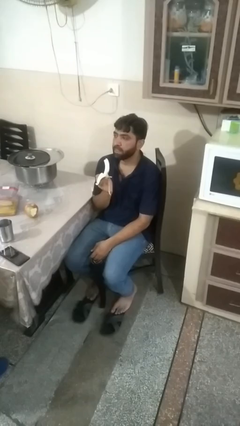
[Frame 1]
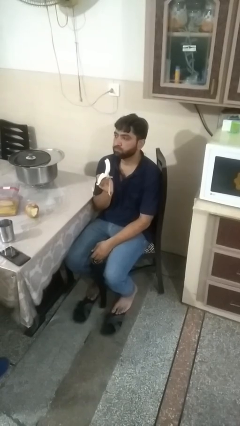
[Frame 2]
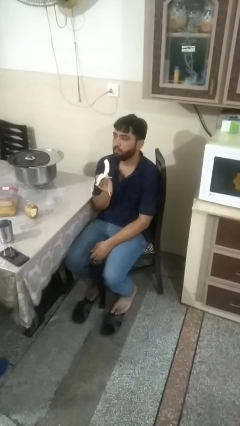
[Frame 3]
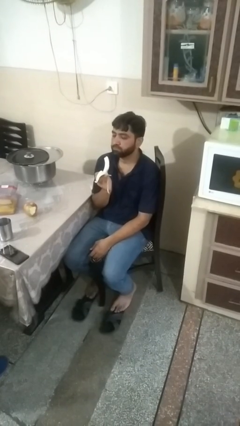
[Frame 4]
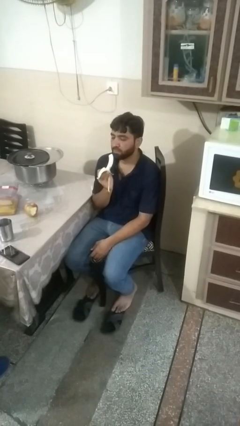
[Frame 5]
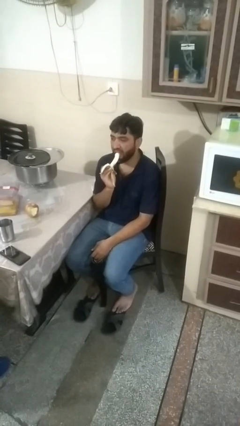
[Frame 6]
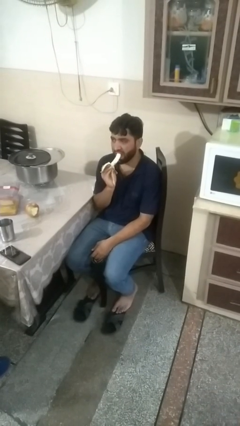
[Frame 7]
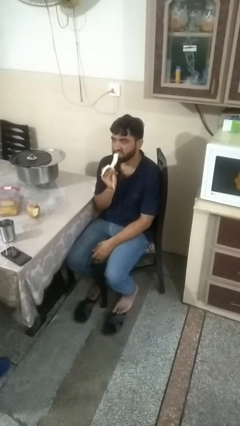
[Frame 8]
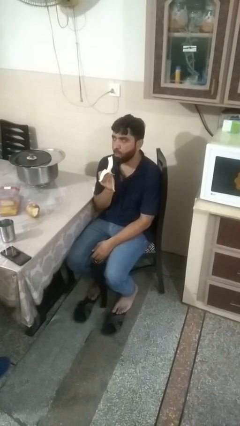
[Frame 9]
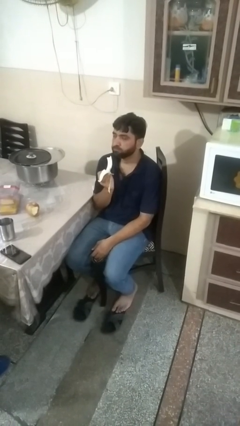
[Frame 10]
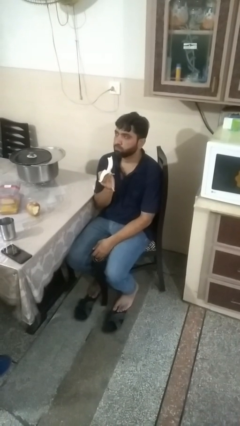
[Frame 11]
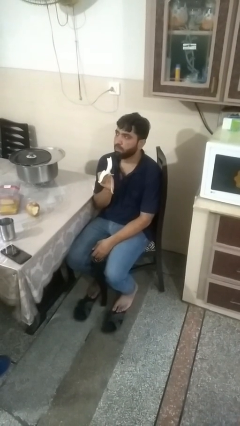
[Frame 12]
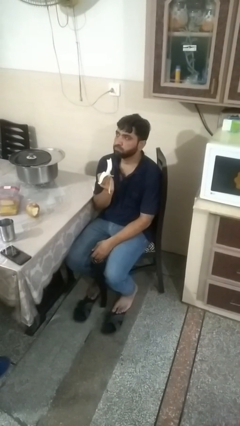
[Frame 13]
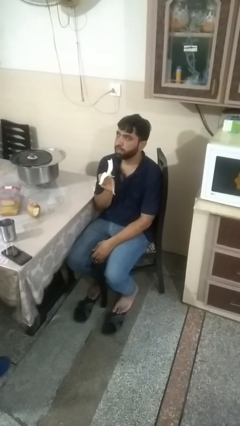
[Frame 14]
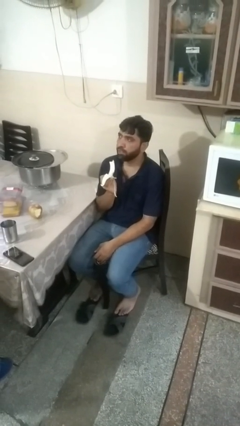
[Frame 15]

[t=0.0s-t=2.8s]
person eats banana

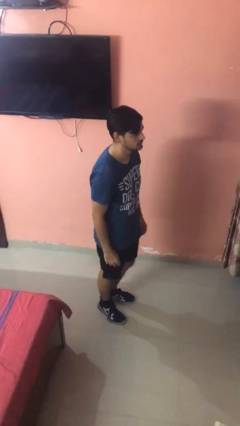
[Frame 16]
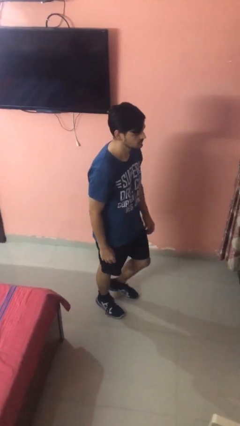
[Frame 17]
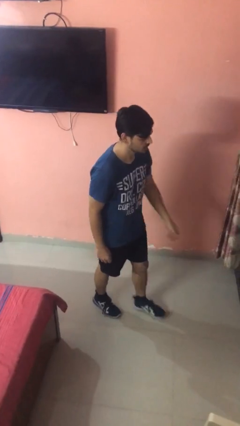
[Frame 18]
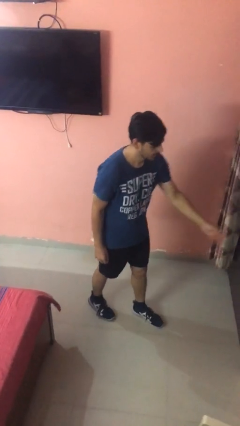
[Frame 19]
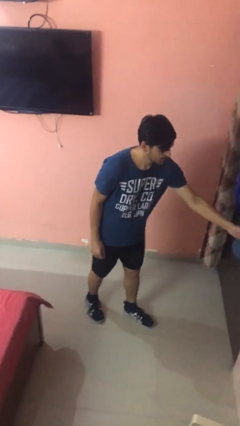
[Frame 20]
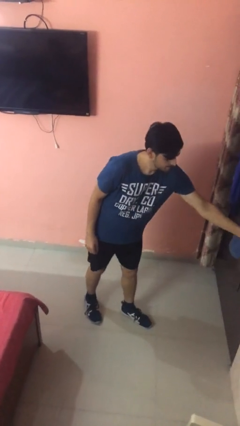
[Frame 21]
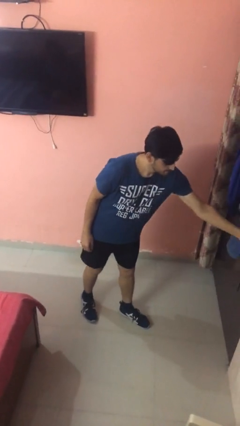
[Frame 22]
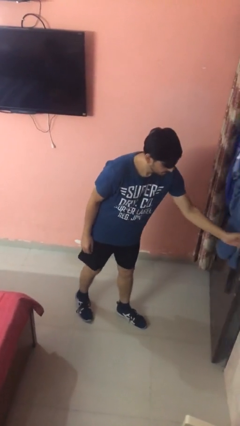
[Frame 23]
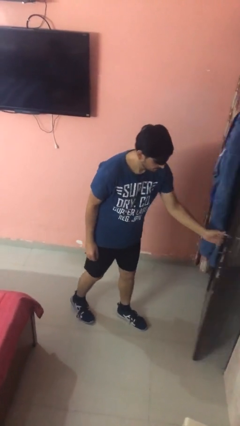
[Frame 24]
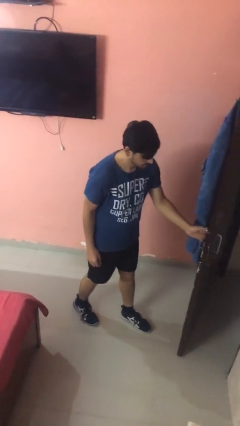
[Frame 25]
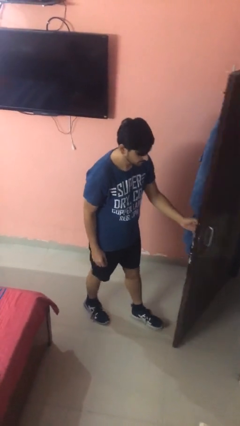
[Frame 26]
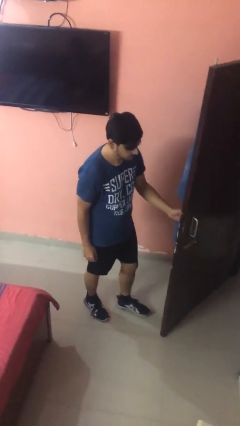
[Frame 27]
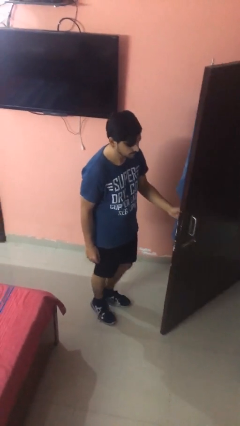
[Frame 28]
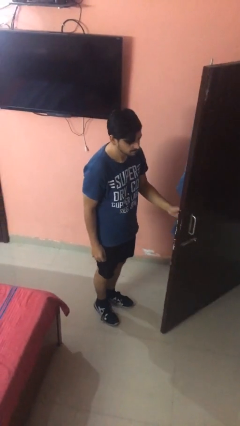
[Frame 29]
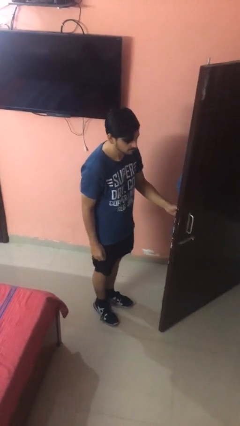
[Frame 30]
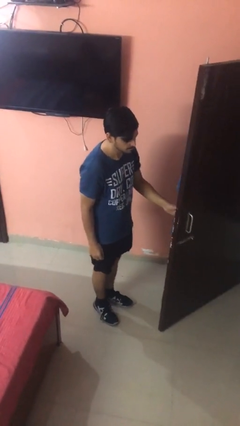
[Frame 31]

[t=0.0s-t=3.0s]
person opens facility door

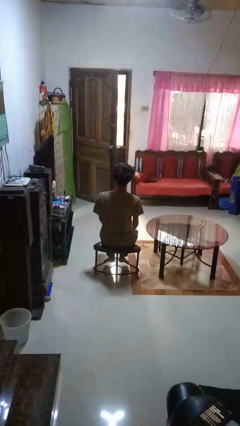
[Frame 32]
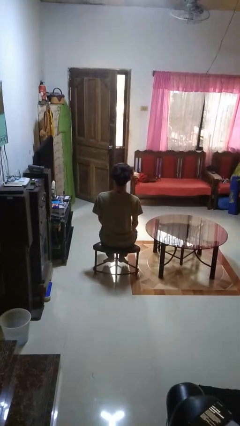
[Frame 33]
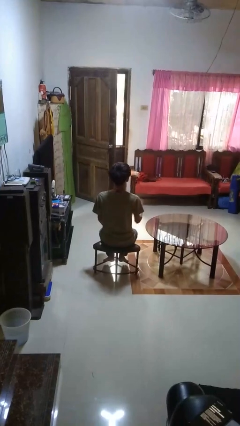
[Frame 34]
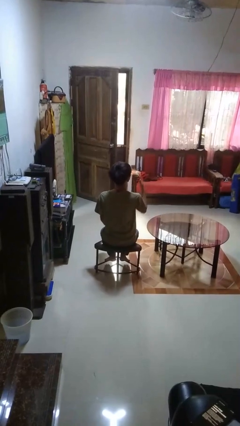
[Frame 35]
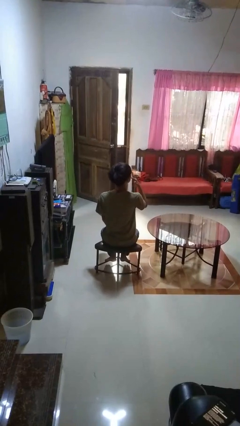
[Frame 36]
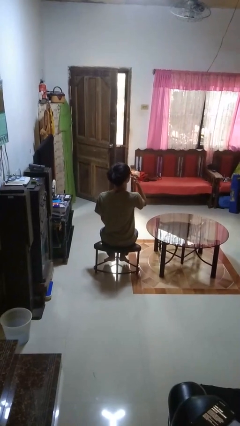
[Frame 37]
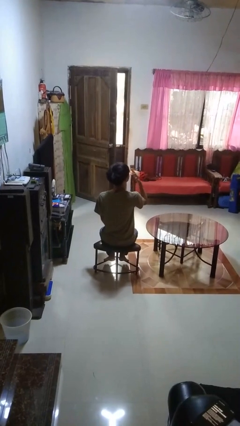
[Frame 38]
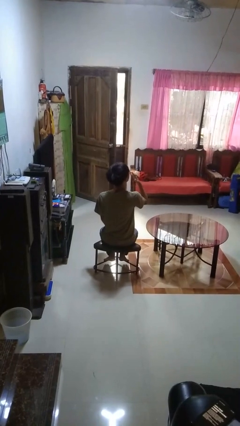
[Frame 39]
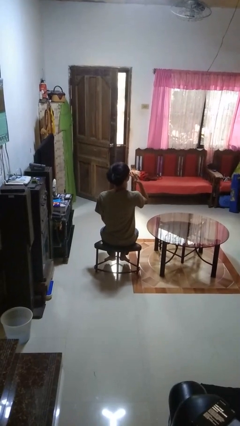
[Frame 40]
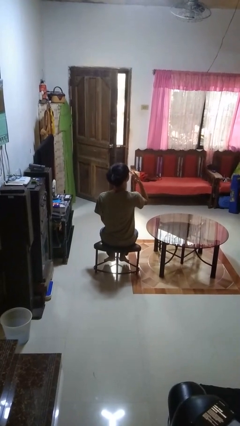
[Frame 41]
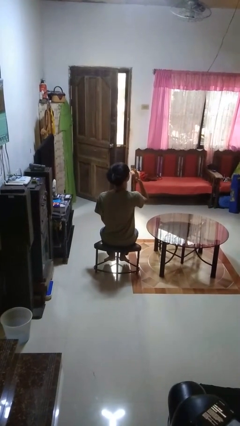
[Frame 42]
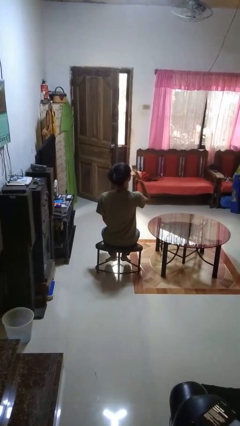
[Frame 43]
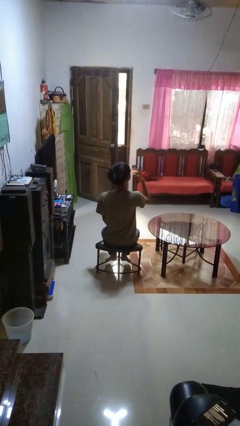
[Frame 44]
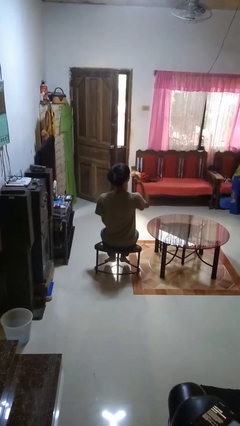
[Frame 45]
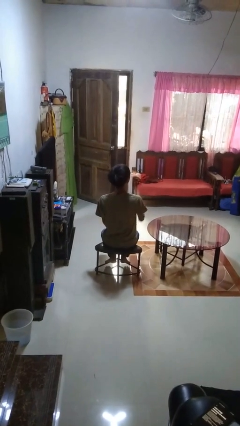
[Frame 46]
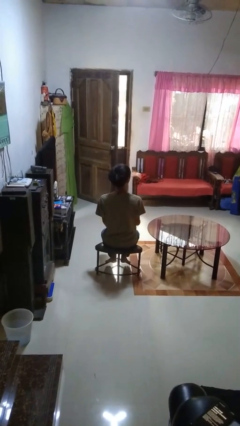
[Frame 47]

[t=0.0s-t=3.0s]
person licks fingers

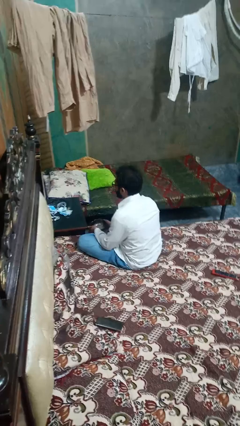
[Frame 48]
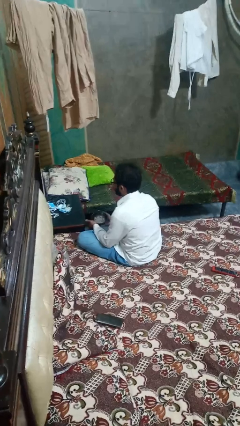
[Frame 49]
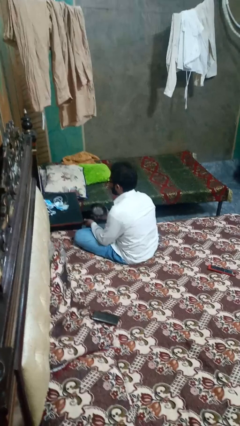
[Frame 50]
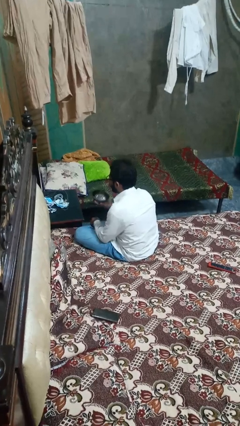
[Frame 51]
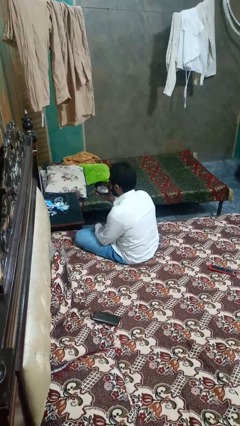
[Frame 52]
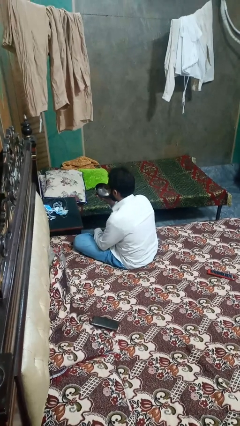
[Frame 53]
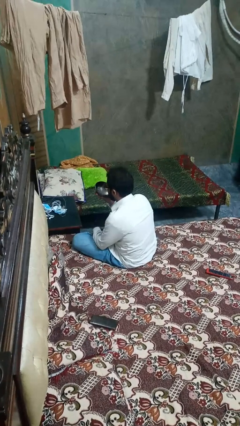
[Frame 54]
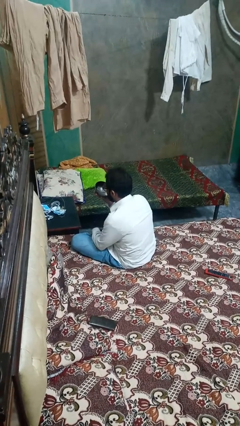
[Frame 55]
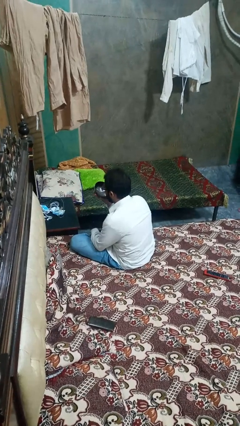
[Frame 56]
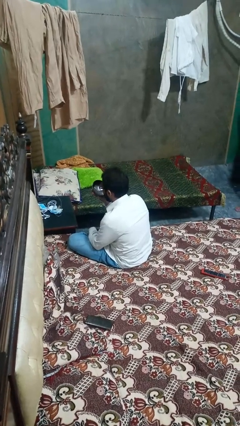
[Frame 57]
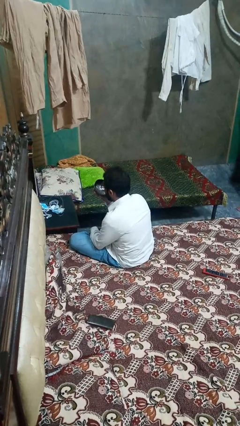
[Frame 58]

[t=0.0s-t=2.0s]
person drinks from shotglass

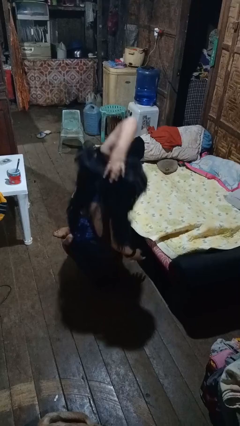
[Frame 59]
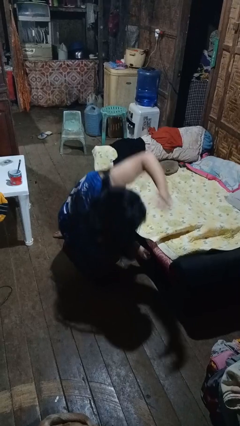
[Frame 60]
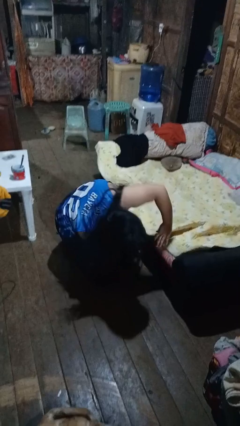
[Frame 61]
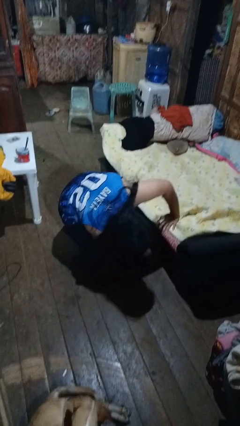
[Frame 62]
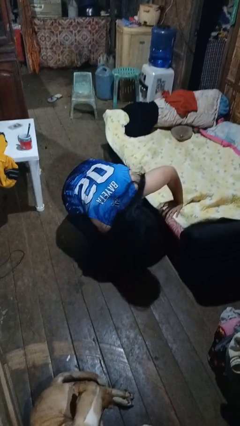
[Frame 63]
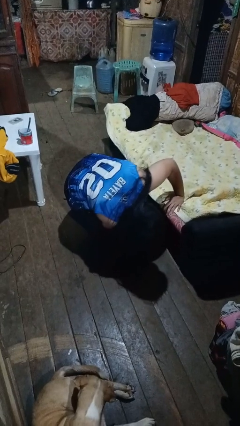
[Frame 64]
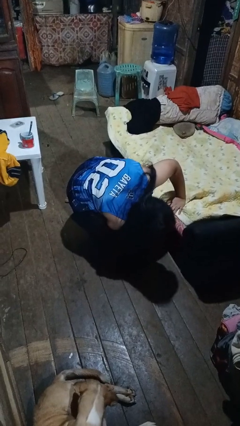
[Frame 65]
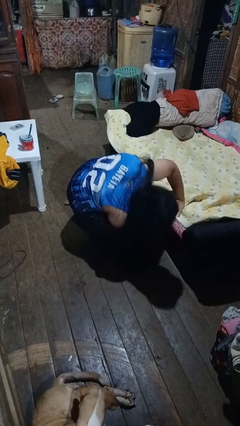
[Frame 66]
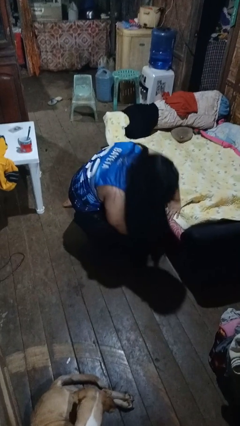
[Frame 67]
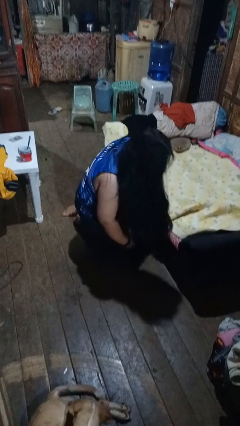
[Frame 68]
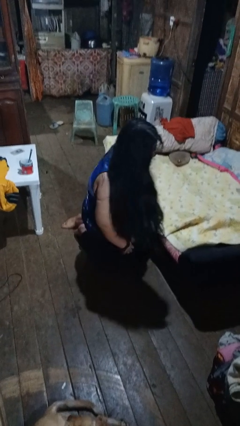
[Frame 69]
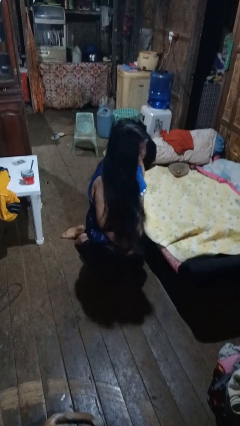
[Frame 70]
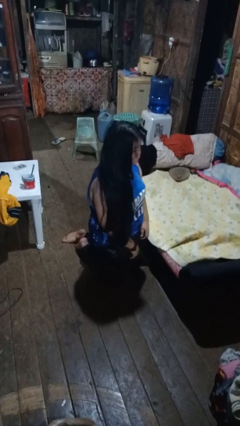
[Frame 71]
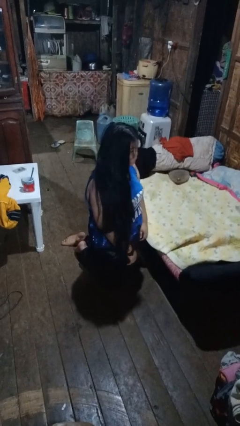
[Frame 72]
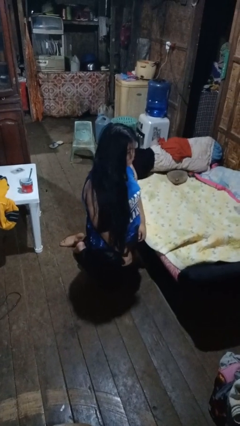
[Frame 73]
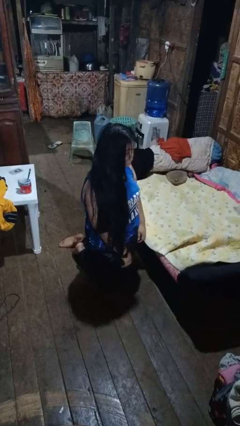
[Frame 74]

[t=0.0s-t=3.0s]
person searches under bed

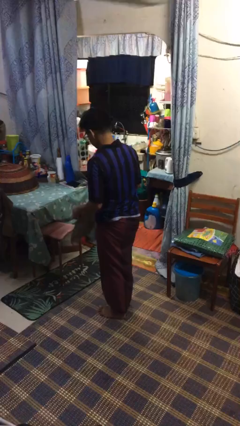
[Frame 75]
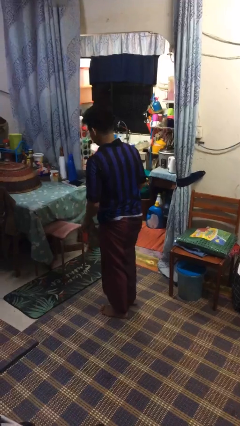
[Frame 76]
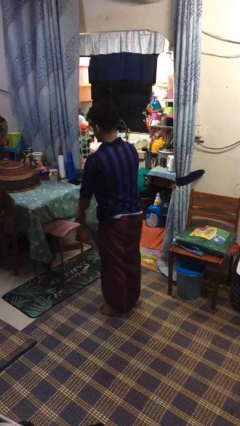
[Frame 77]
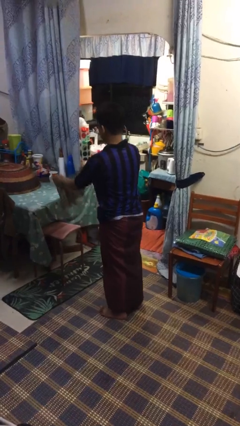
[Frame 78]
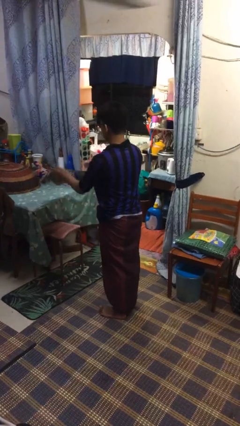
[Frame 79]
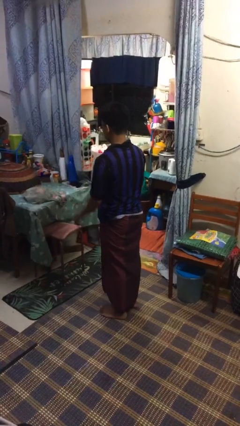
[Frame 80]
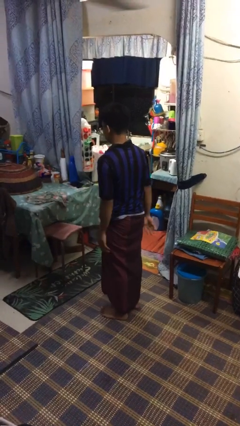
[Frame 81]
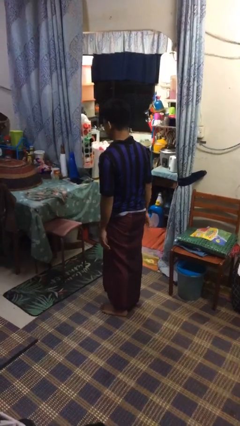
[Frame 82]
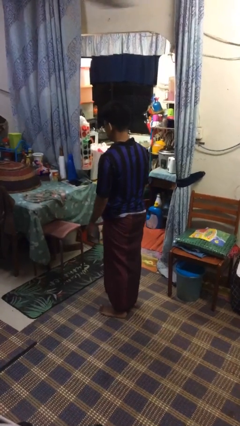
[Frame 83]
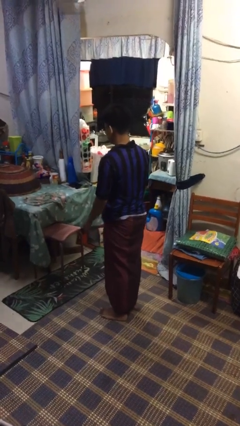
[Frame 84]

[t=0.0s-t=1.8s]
person throws object on table

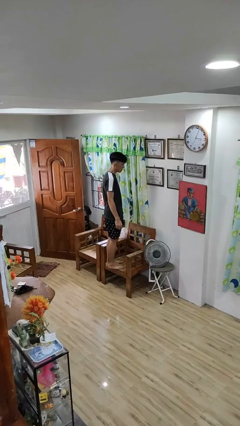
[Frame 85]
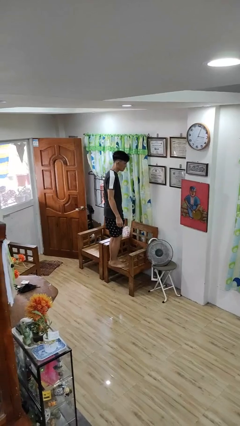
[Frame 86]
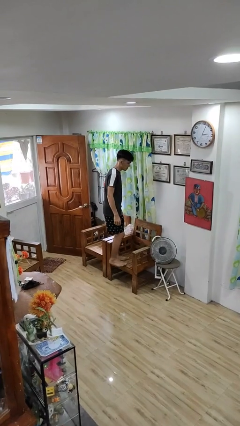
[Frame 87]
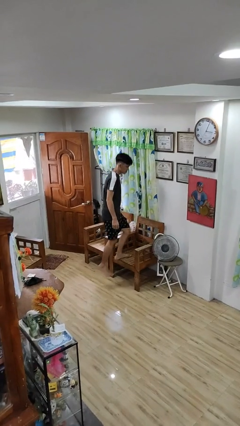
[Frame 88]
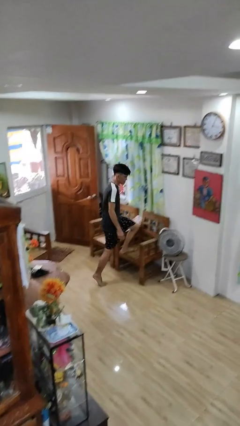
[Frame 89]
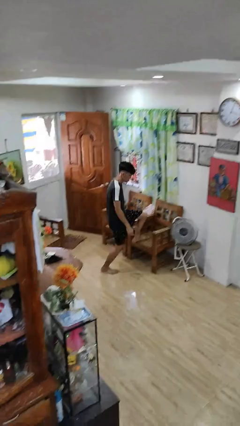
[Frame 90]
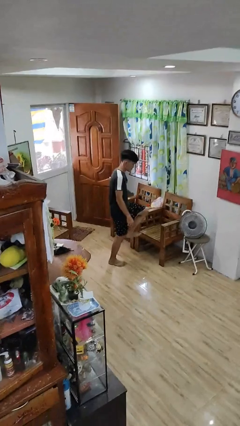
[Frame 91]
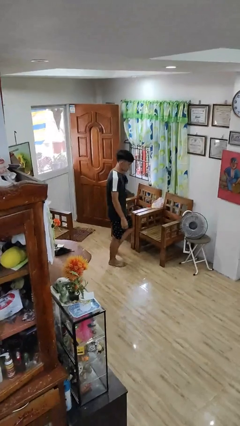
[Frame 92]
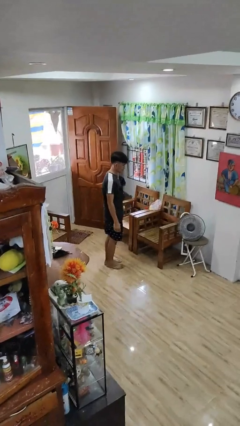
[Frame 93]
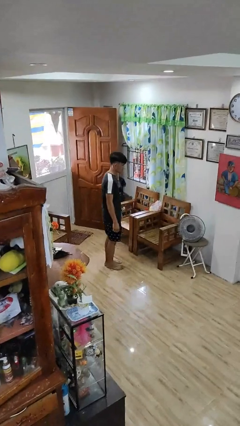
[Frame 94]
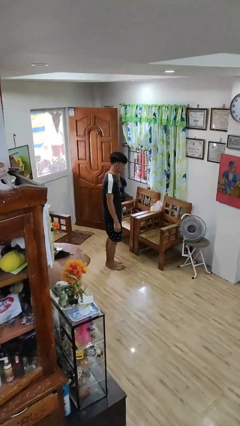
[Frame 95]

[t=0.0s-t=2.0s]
person climbs off chair
